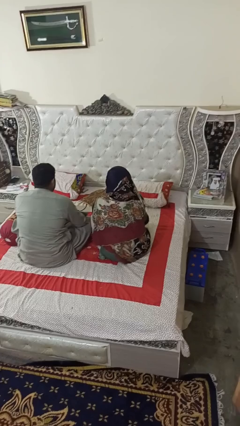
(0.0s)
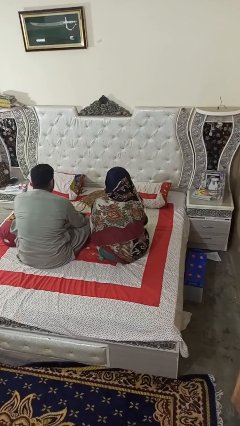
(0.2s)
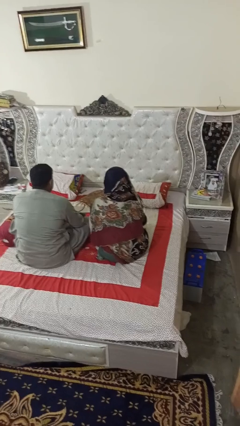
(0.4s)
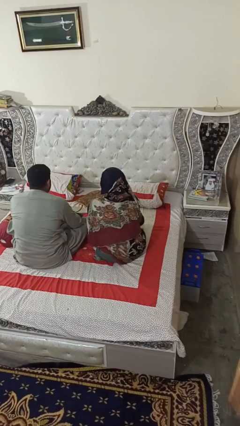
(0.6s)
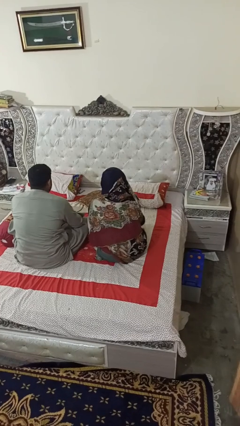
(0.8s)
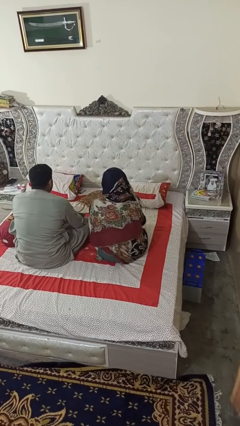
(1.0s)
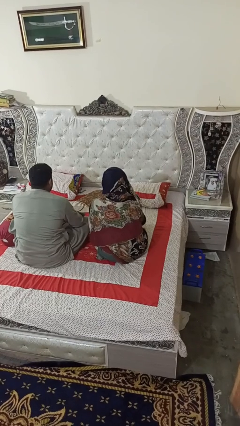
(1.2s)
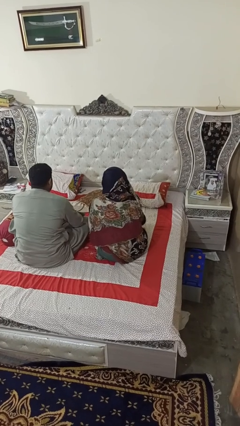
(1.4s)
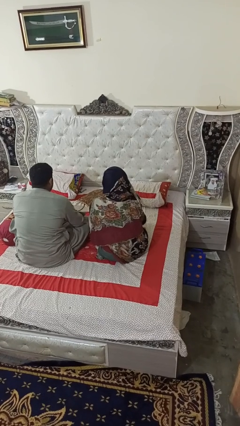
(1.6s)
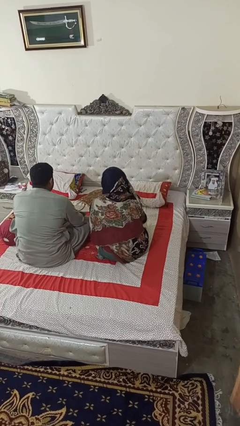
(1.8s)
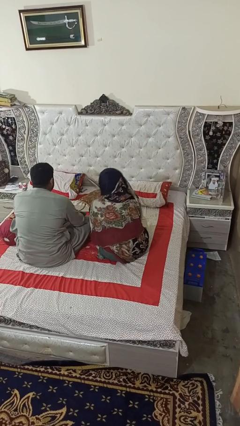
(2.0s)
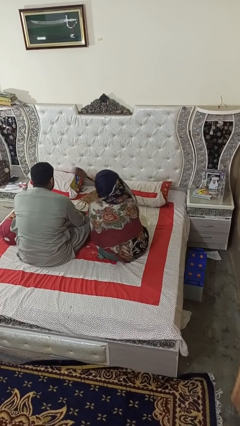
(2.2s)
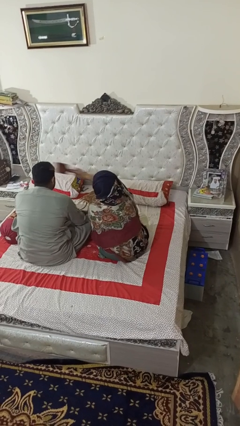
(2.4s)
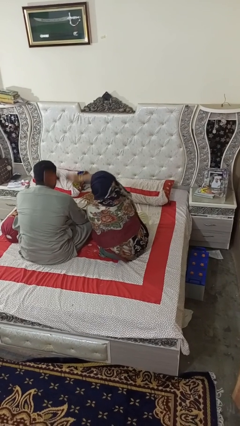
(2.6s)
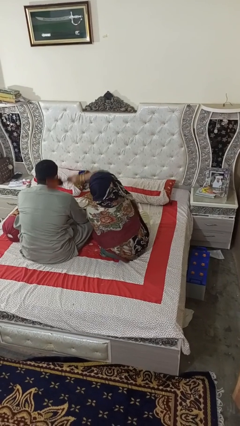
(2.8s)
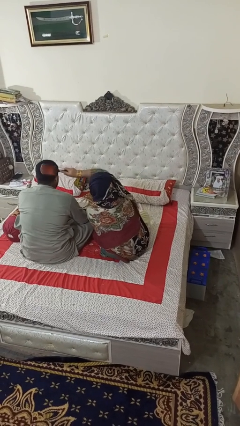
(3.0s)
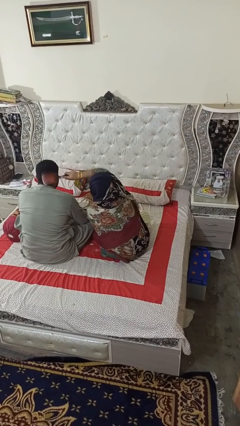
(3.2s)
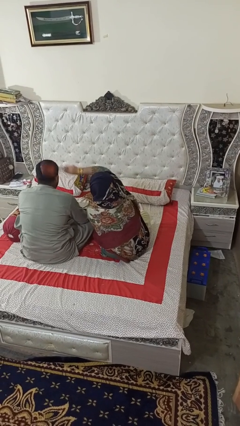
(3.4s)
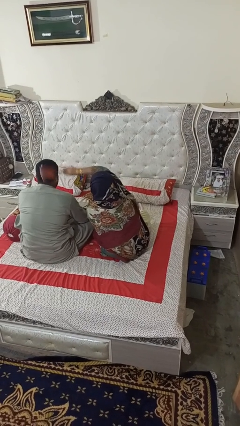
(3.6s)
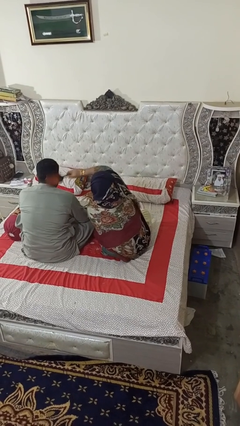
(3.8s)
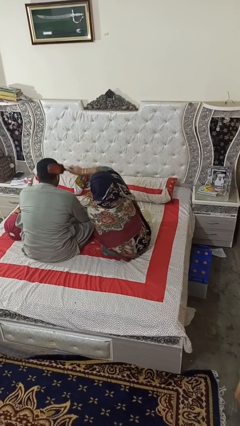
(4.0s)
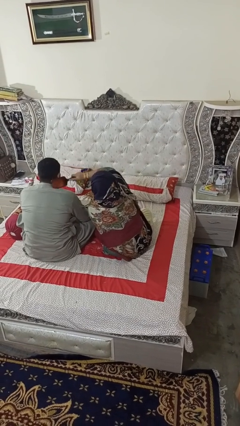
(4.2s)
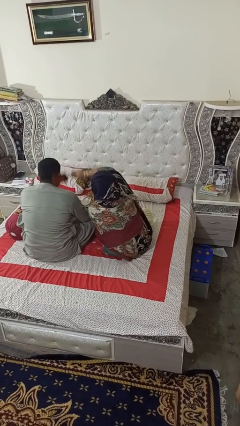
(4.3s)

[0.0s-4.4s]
person brushes hair of person

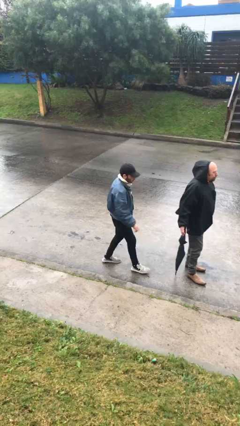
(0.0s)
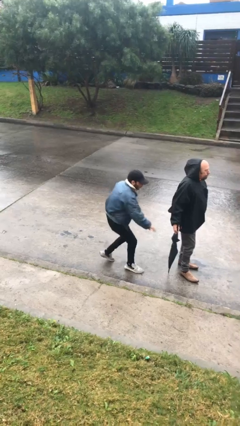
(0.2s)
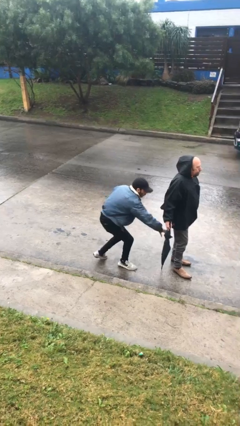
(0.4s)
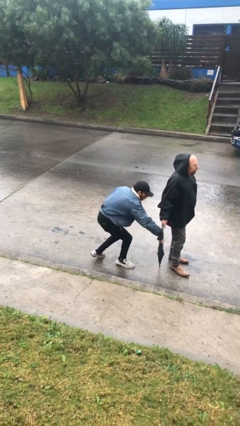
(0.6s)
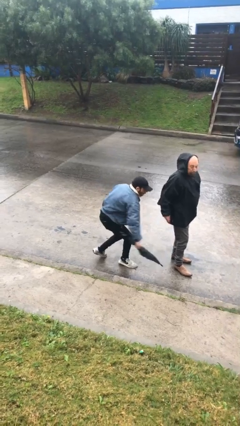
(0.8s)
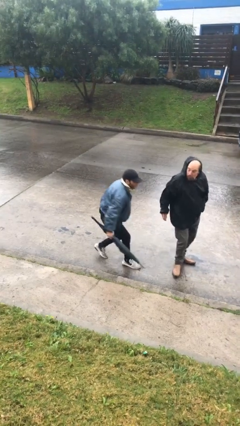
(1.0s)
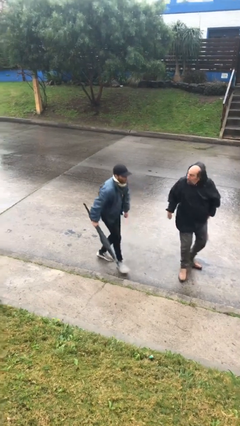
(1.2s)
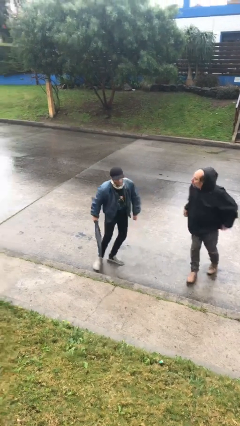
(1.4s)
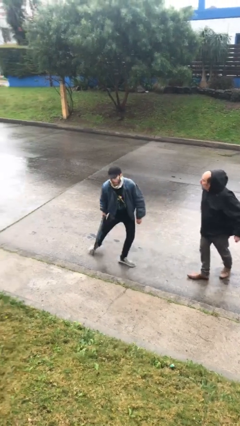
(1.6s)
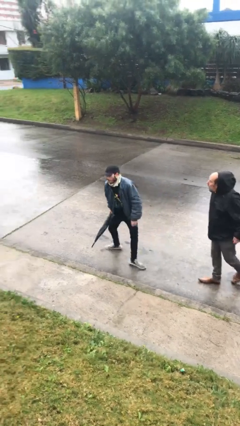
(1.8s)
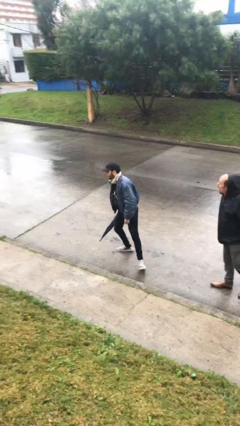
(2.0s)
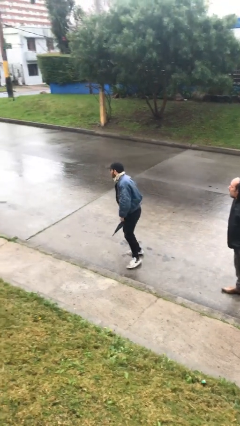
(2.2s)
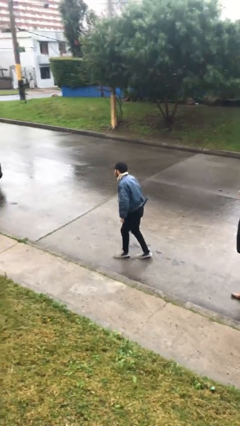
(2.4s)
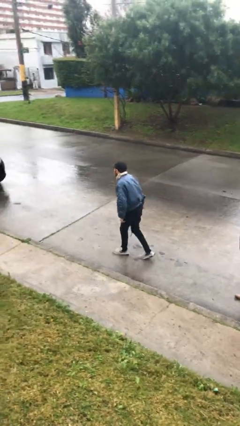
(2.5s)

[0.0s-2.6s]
person steals object from person

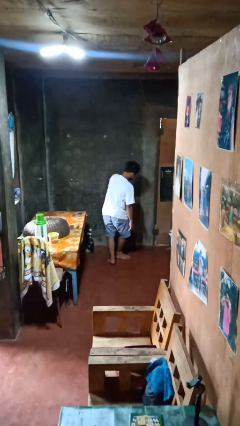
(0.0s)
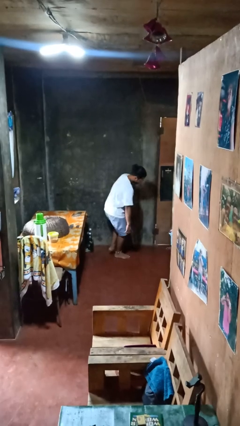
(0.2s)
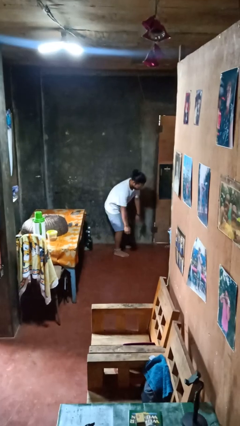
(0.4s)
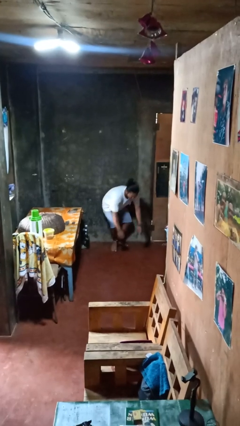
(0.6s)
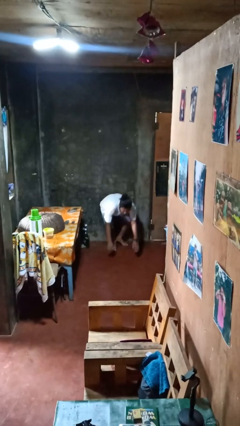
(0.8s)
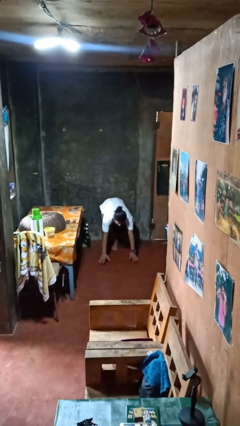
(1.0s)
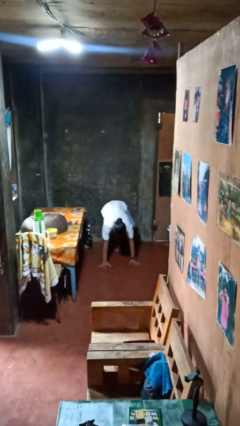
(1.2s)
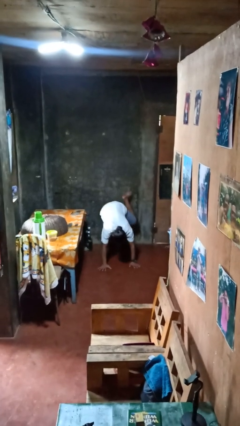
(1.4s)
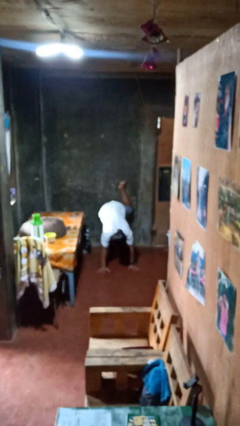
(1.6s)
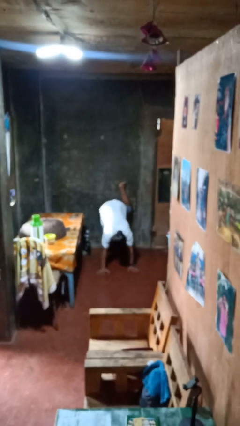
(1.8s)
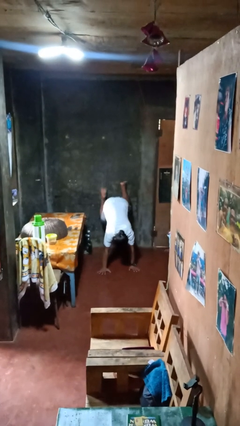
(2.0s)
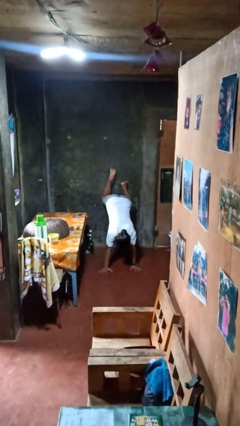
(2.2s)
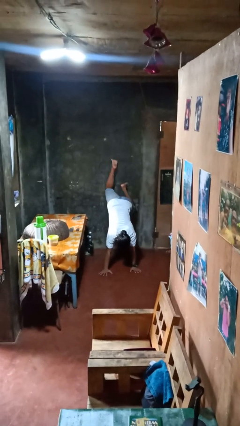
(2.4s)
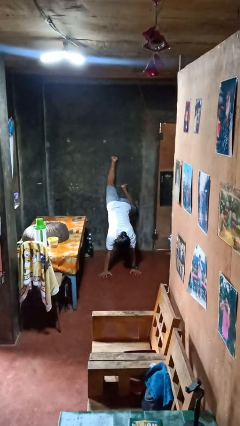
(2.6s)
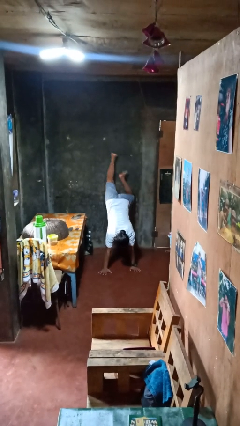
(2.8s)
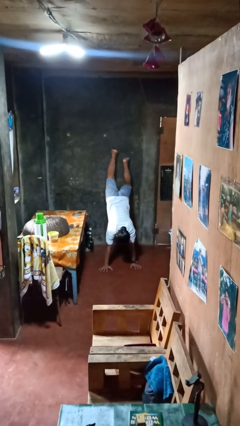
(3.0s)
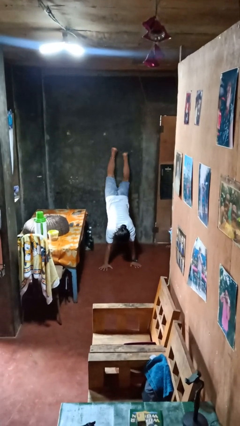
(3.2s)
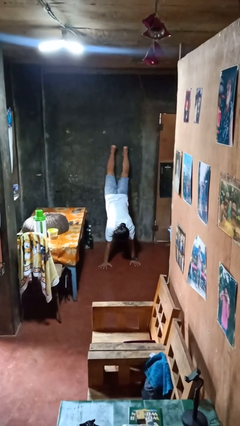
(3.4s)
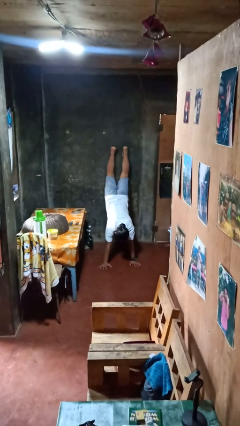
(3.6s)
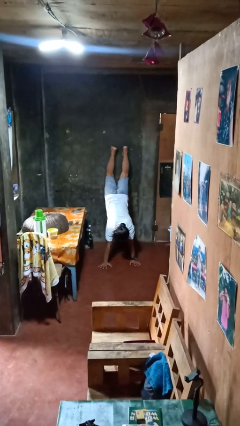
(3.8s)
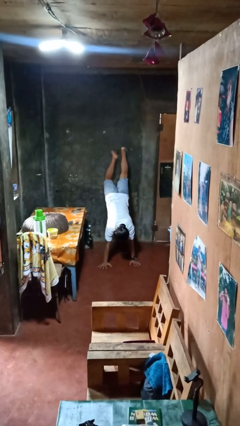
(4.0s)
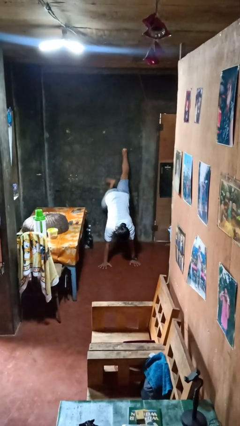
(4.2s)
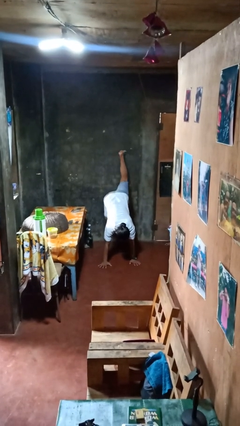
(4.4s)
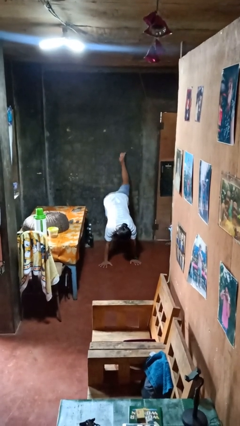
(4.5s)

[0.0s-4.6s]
person handstand

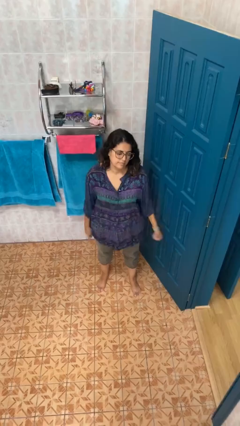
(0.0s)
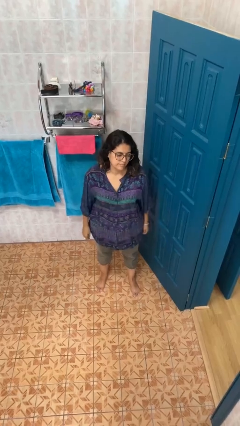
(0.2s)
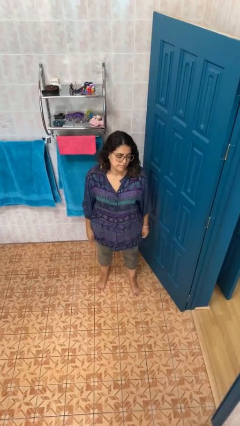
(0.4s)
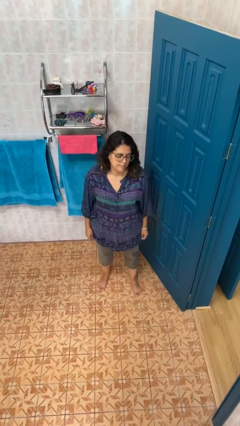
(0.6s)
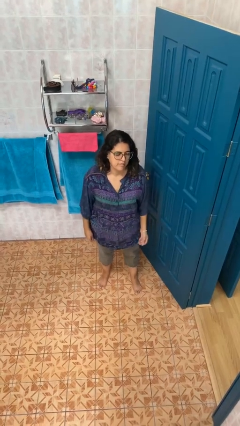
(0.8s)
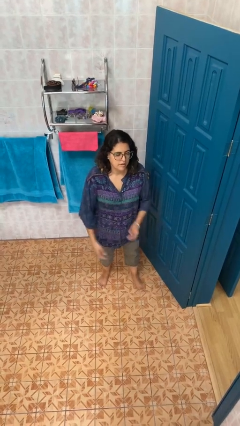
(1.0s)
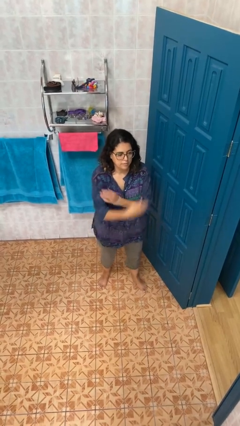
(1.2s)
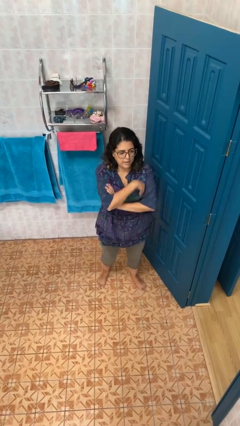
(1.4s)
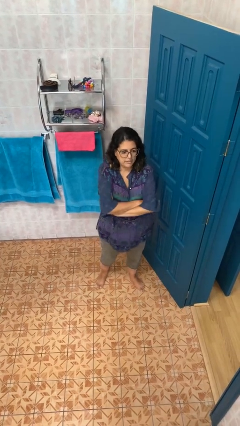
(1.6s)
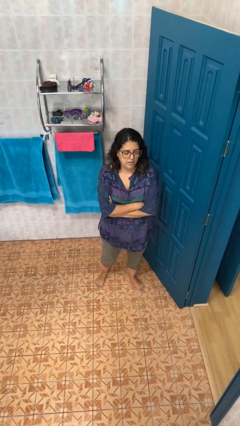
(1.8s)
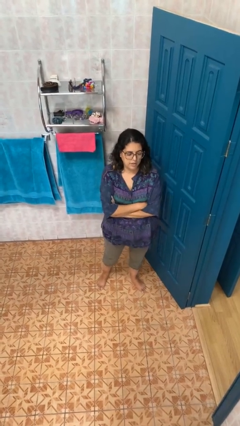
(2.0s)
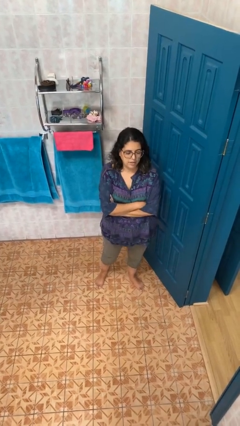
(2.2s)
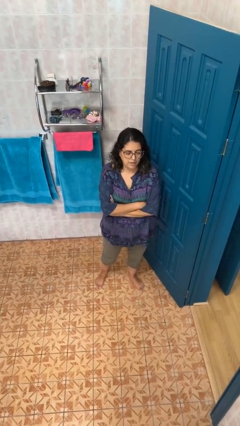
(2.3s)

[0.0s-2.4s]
person crosses arms

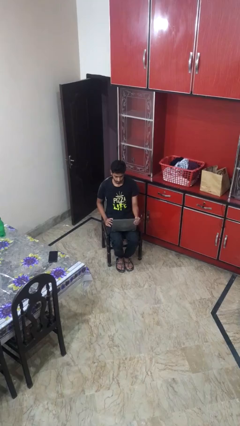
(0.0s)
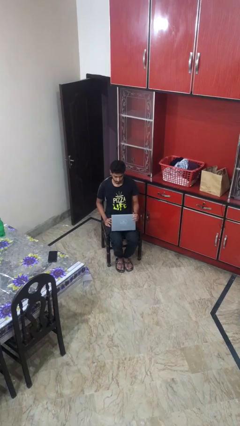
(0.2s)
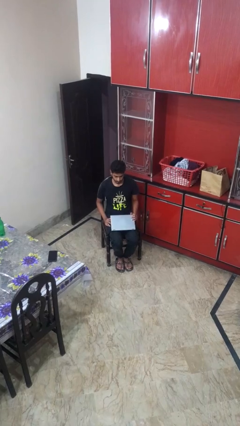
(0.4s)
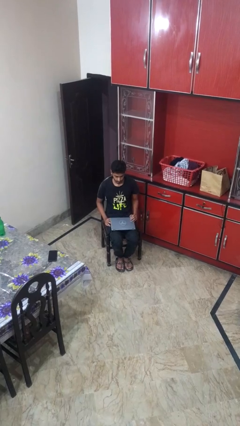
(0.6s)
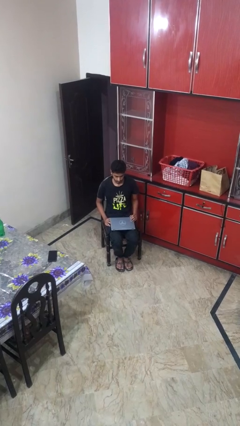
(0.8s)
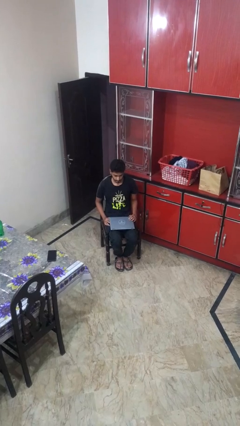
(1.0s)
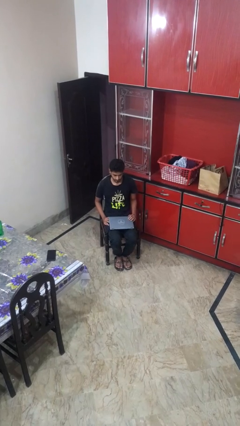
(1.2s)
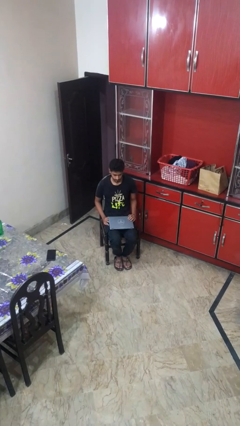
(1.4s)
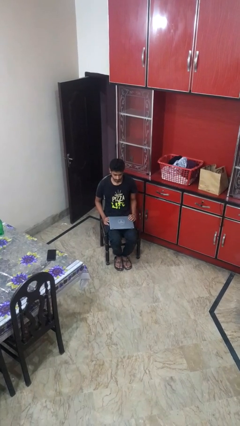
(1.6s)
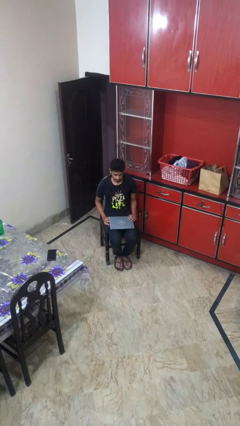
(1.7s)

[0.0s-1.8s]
person closes laptop

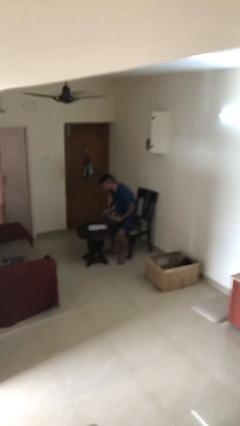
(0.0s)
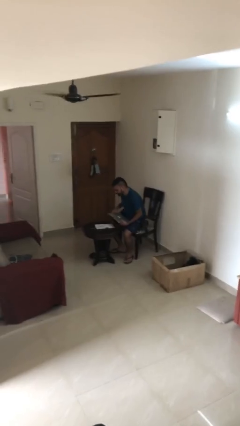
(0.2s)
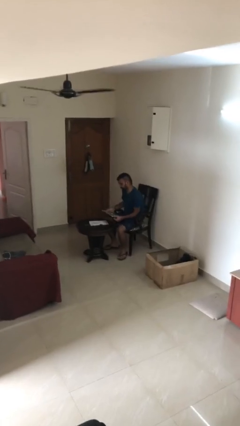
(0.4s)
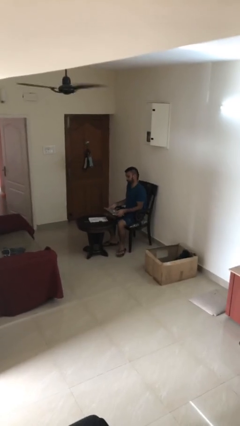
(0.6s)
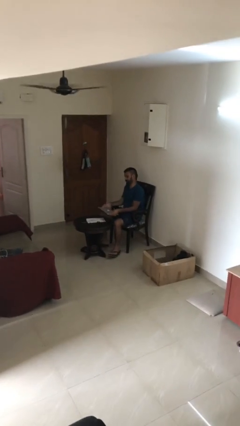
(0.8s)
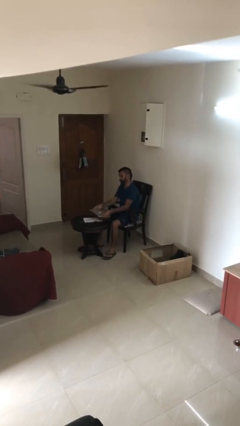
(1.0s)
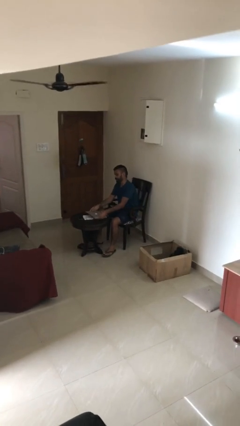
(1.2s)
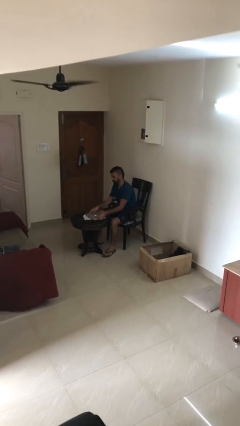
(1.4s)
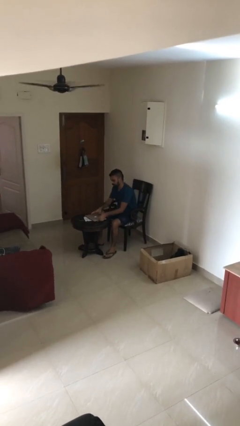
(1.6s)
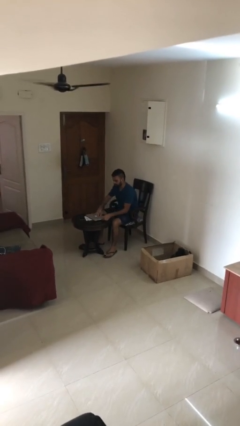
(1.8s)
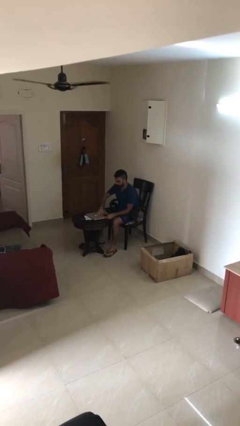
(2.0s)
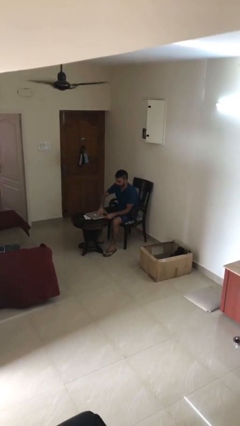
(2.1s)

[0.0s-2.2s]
person sits down
